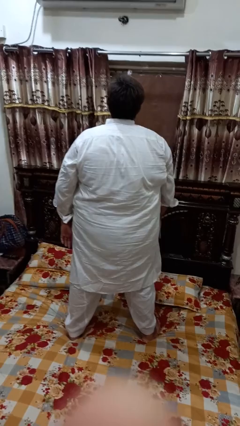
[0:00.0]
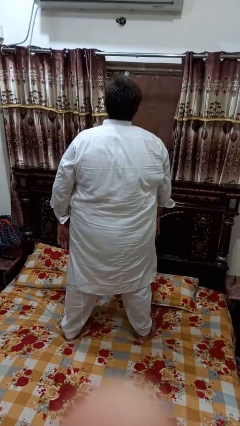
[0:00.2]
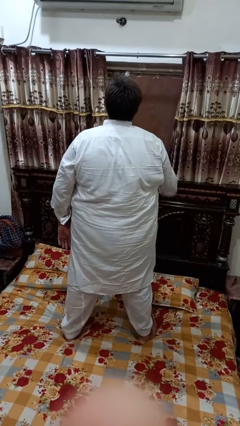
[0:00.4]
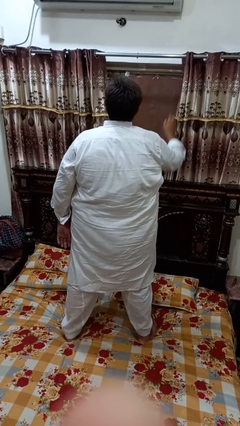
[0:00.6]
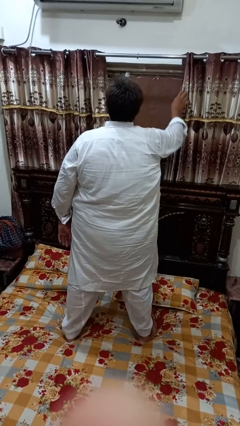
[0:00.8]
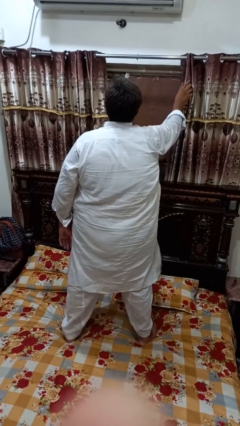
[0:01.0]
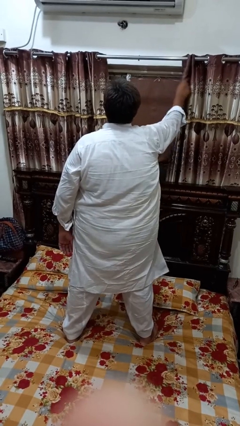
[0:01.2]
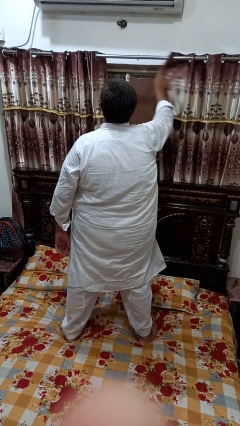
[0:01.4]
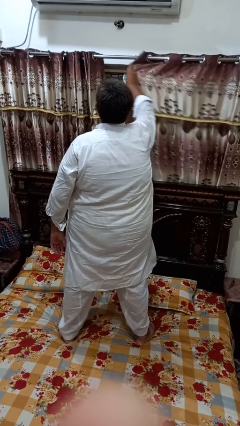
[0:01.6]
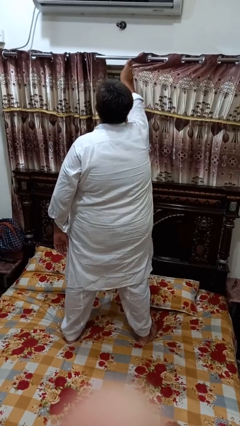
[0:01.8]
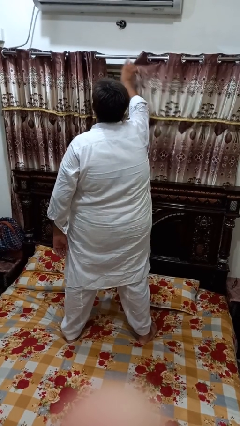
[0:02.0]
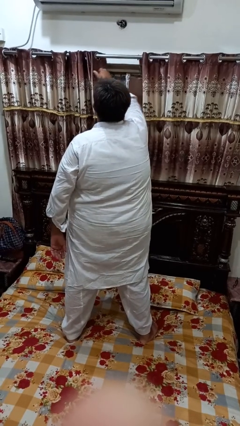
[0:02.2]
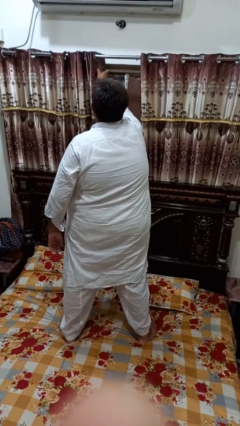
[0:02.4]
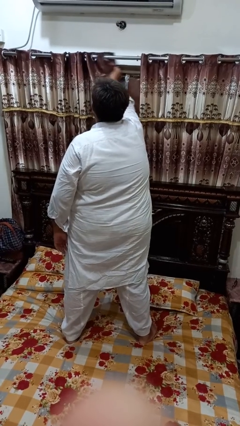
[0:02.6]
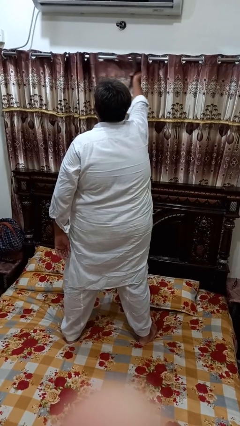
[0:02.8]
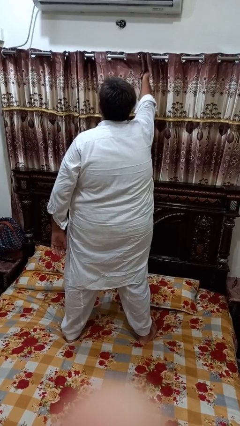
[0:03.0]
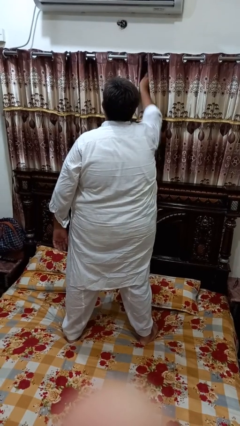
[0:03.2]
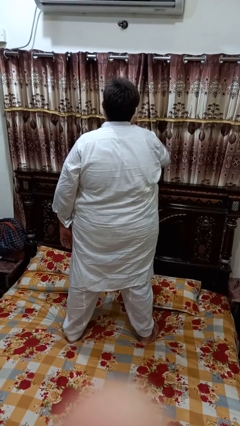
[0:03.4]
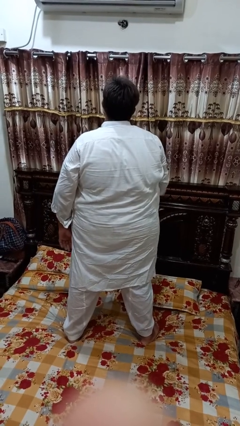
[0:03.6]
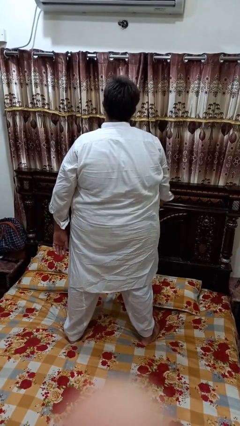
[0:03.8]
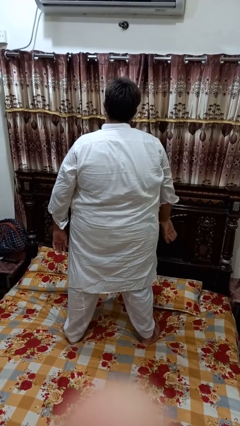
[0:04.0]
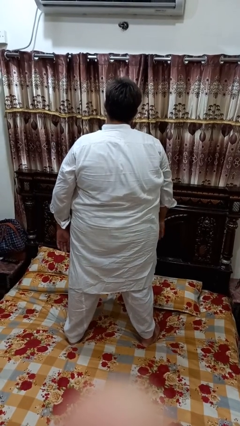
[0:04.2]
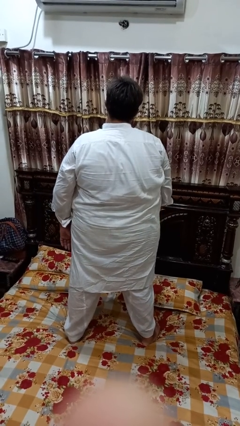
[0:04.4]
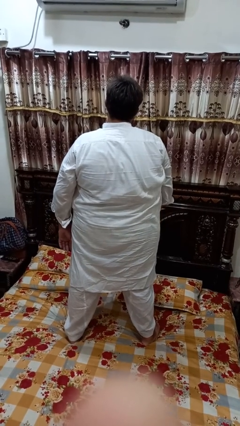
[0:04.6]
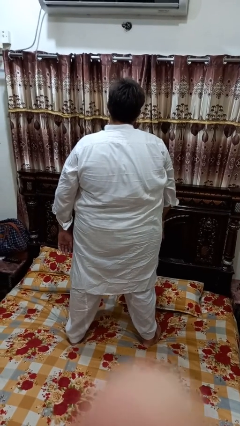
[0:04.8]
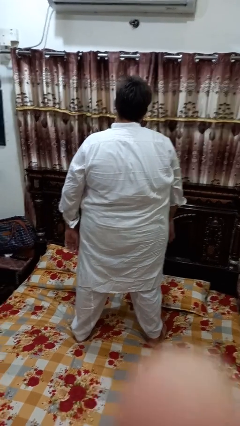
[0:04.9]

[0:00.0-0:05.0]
person closes curtains

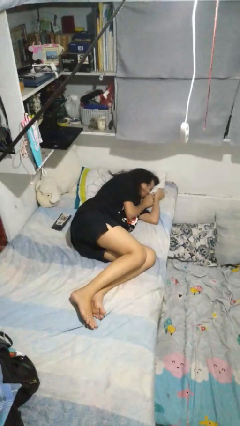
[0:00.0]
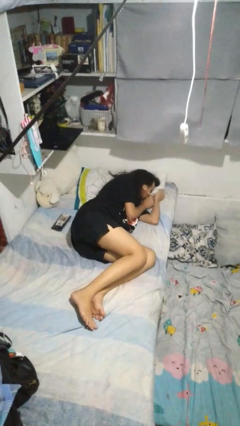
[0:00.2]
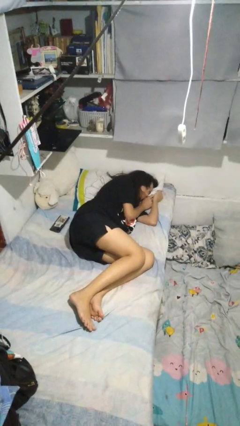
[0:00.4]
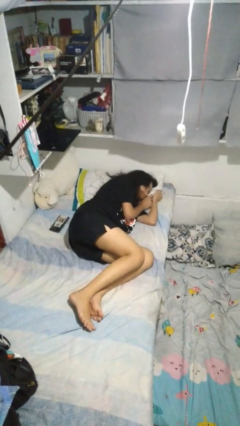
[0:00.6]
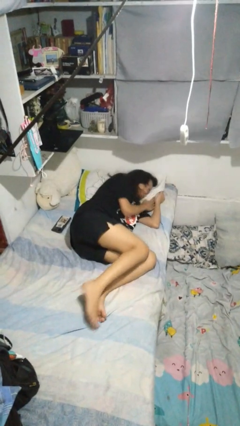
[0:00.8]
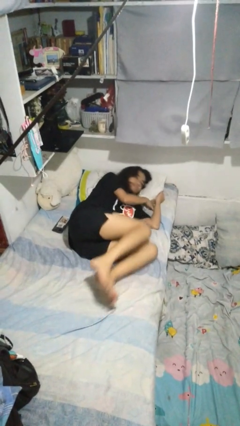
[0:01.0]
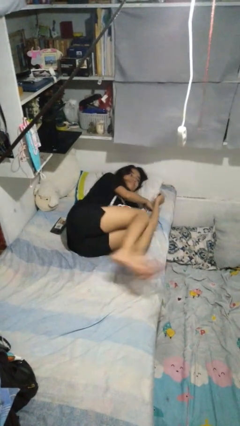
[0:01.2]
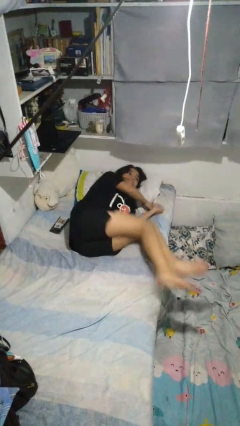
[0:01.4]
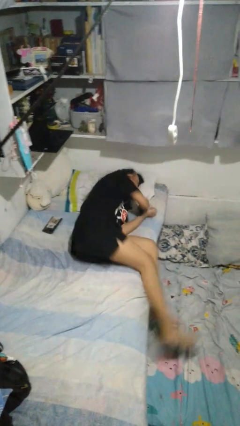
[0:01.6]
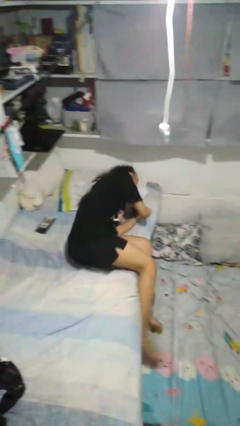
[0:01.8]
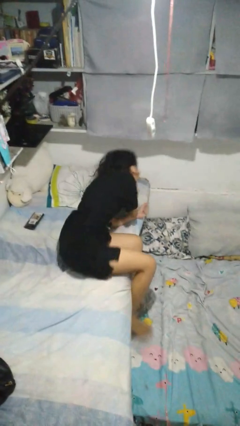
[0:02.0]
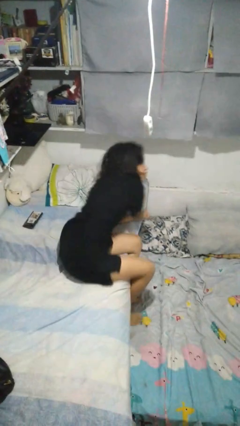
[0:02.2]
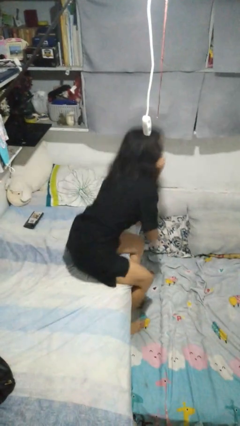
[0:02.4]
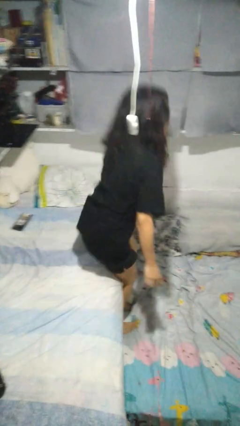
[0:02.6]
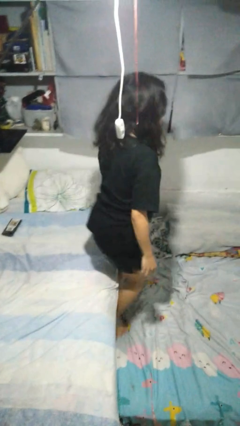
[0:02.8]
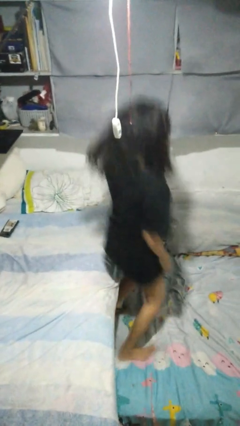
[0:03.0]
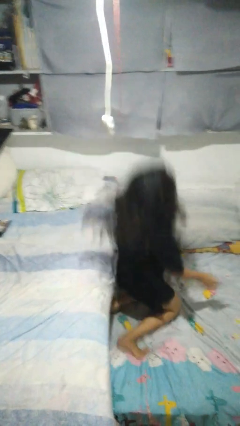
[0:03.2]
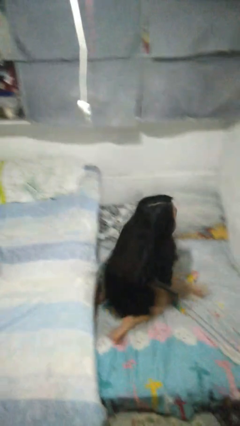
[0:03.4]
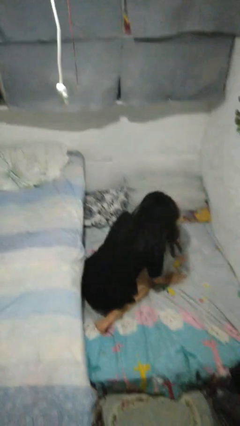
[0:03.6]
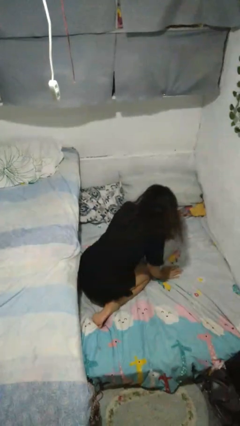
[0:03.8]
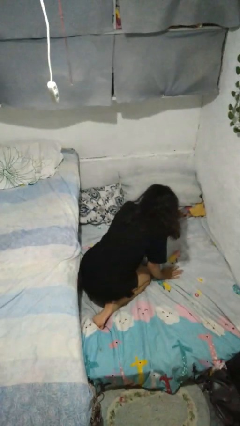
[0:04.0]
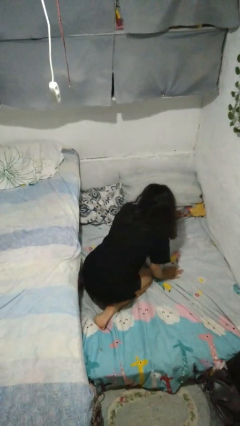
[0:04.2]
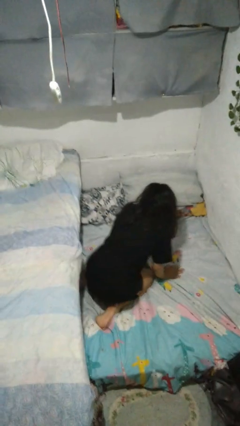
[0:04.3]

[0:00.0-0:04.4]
person falls from bed

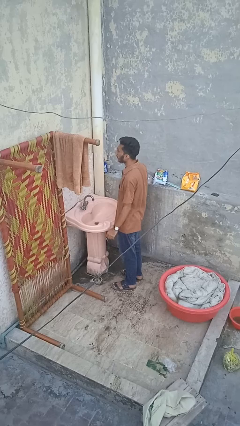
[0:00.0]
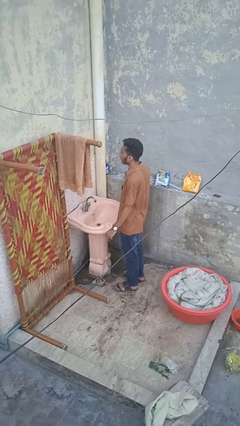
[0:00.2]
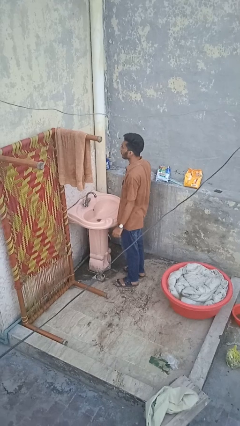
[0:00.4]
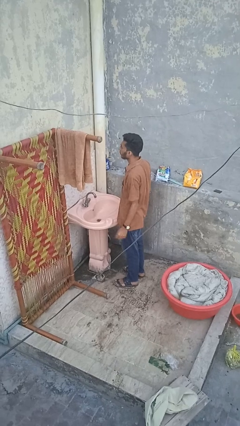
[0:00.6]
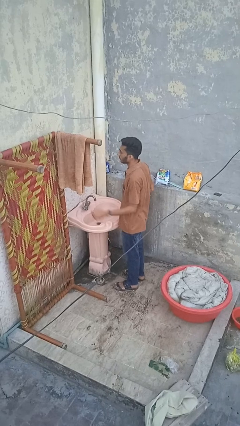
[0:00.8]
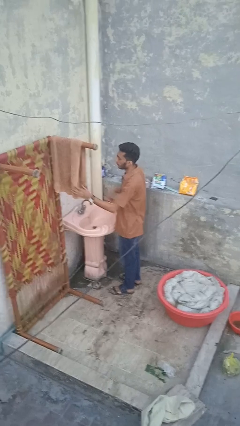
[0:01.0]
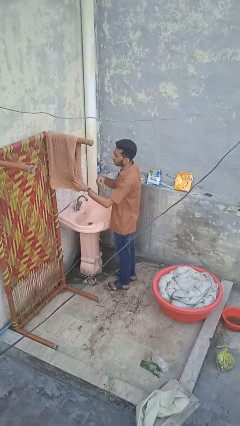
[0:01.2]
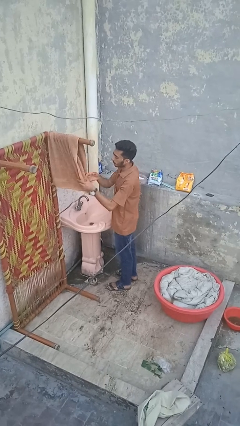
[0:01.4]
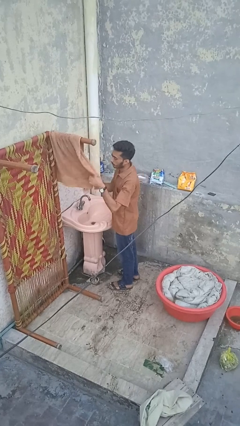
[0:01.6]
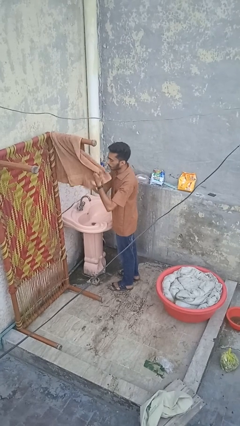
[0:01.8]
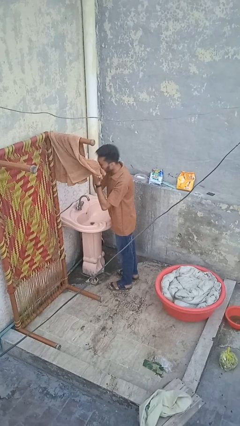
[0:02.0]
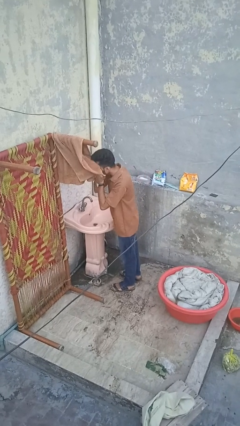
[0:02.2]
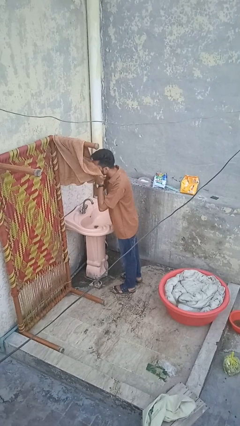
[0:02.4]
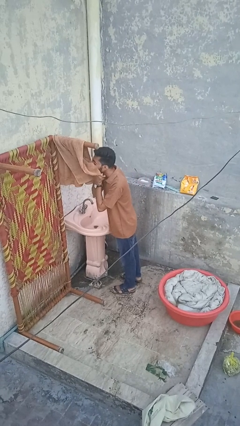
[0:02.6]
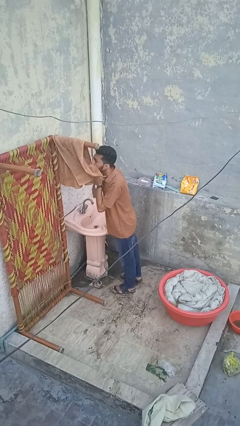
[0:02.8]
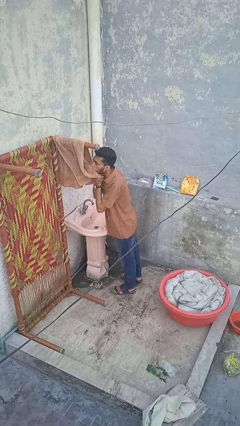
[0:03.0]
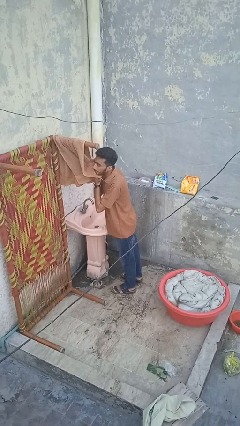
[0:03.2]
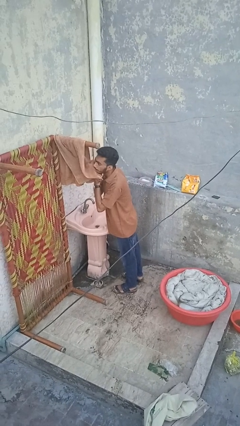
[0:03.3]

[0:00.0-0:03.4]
person dries face with towel

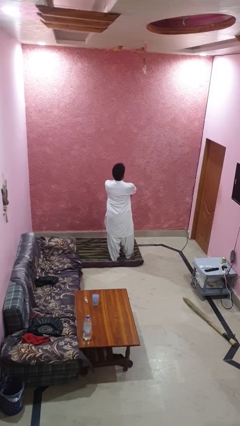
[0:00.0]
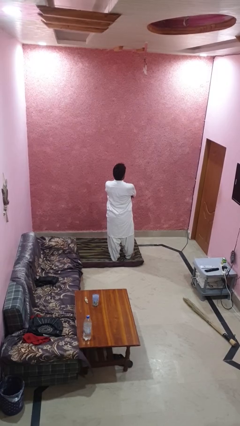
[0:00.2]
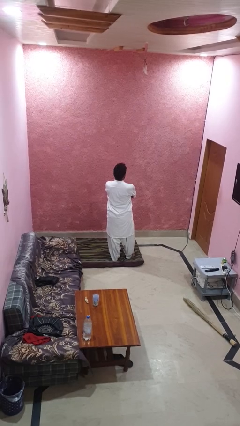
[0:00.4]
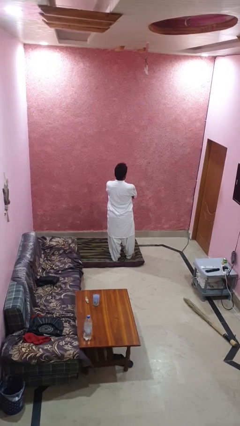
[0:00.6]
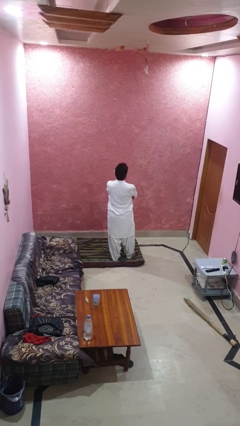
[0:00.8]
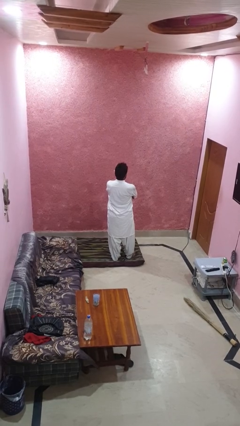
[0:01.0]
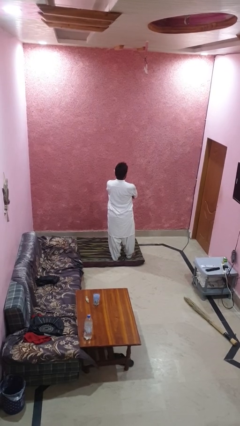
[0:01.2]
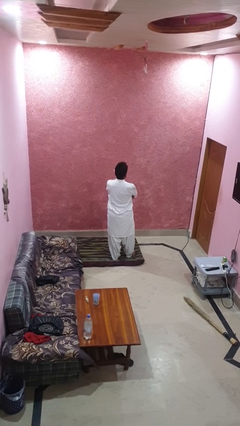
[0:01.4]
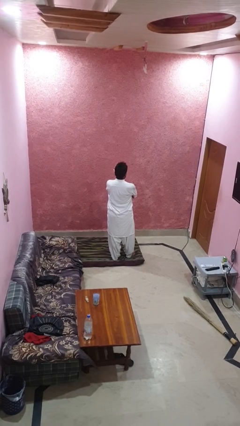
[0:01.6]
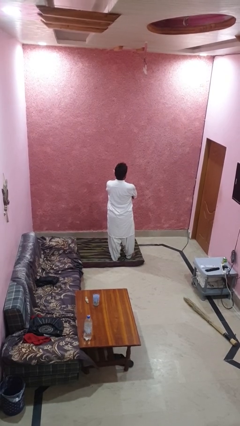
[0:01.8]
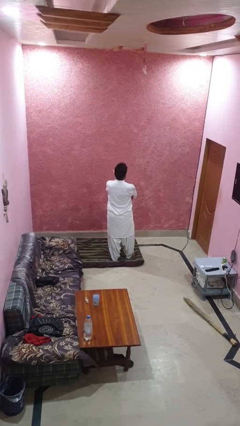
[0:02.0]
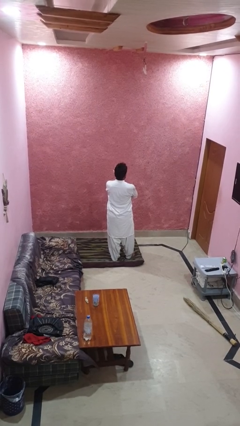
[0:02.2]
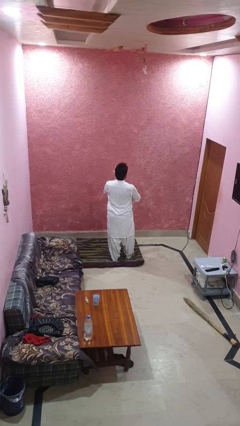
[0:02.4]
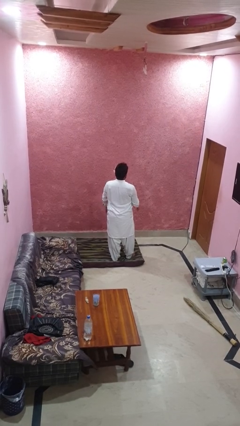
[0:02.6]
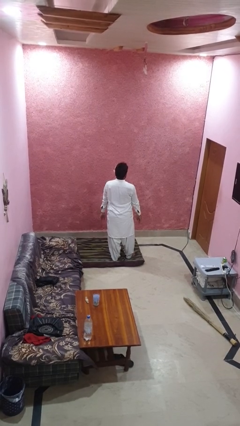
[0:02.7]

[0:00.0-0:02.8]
person crosses arms

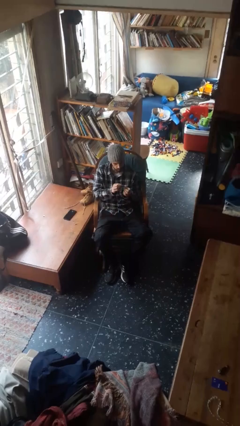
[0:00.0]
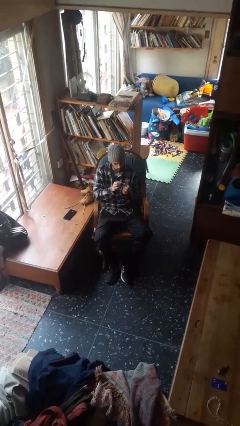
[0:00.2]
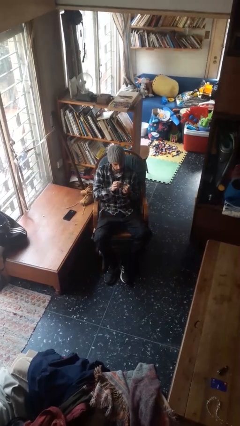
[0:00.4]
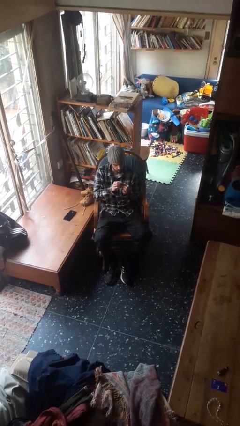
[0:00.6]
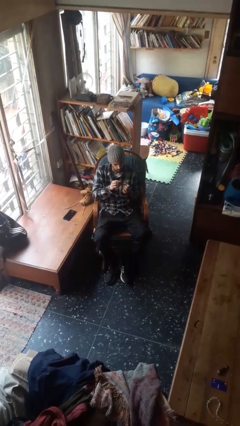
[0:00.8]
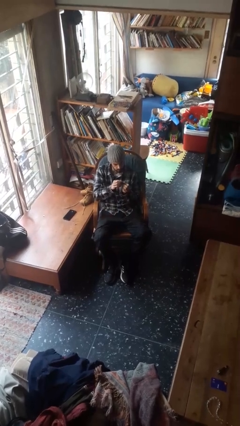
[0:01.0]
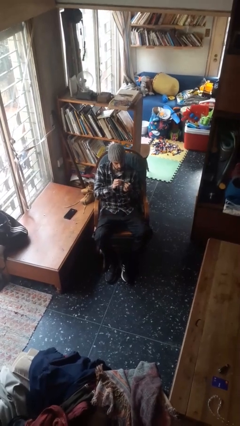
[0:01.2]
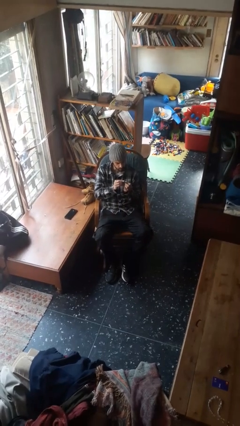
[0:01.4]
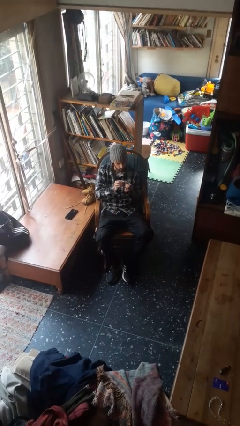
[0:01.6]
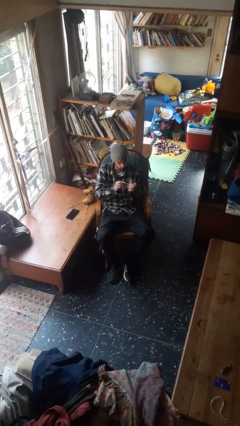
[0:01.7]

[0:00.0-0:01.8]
person files fingernails
